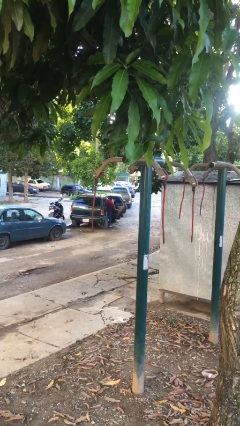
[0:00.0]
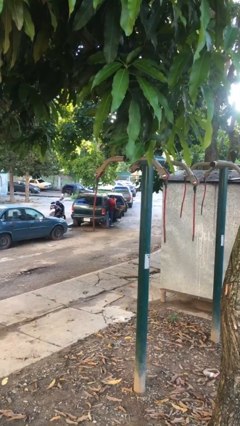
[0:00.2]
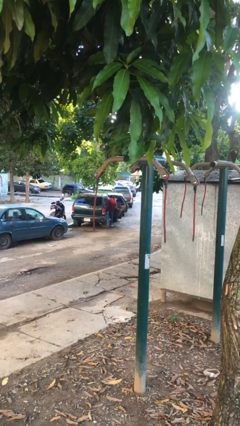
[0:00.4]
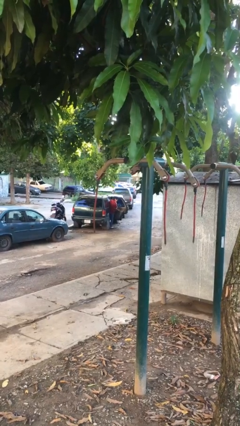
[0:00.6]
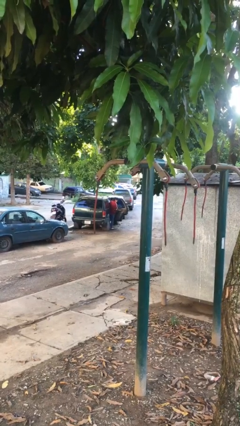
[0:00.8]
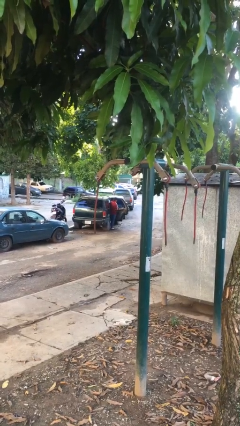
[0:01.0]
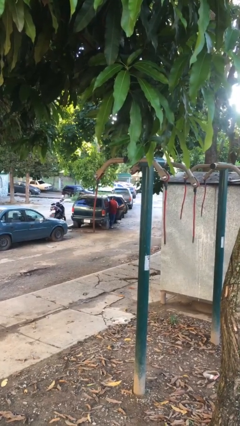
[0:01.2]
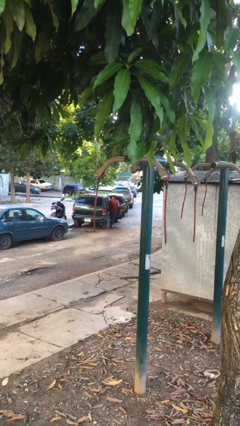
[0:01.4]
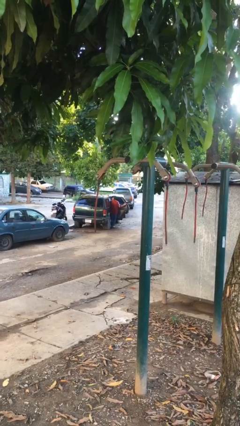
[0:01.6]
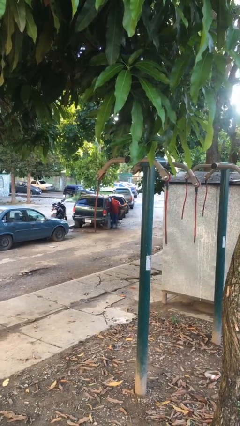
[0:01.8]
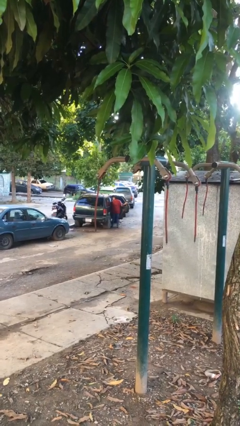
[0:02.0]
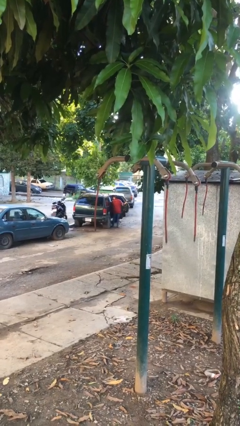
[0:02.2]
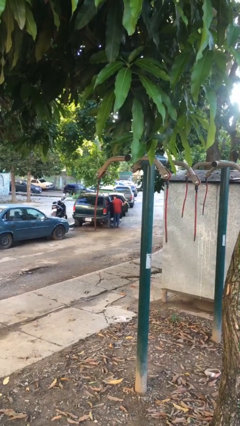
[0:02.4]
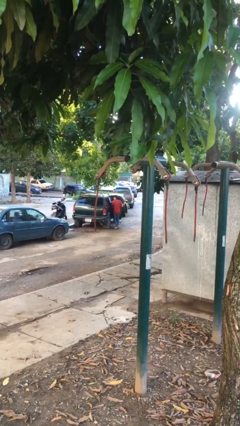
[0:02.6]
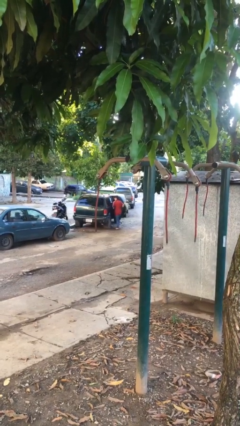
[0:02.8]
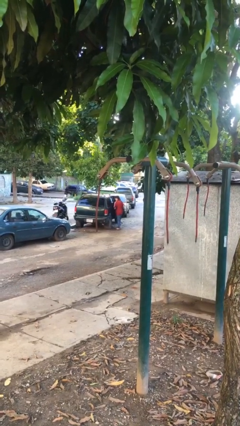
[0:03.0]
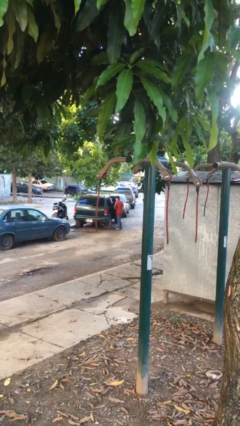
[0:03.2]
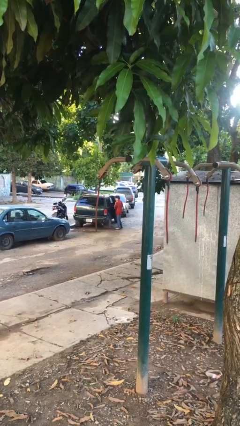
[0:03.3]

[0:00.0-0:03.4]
person exits car

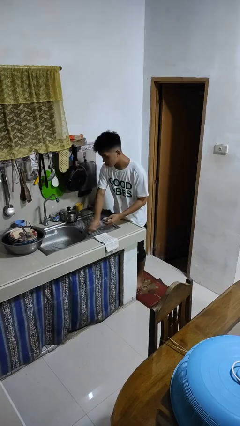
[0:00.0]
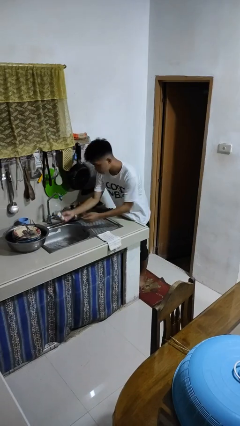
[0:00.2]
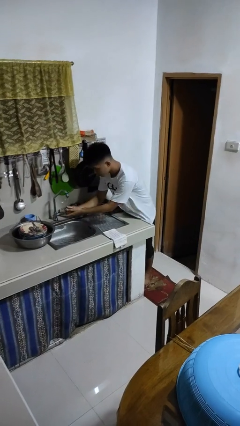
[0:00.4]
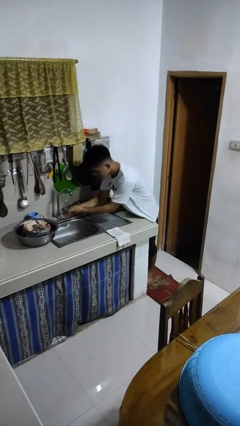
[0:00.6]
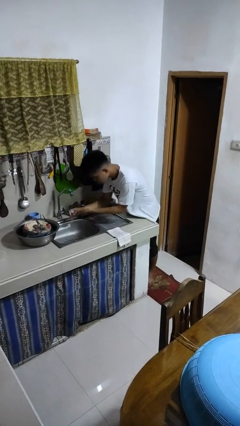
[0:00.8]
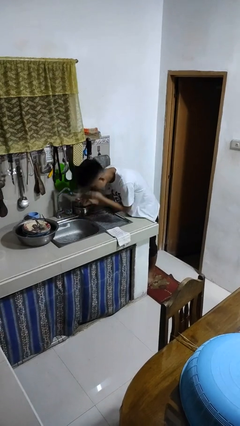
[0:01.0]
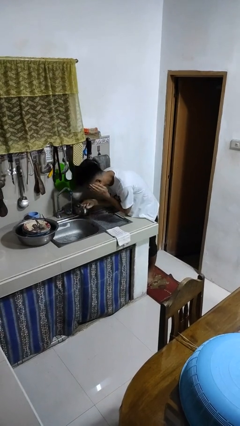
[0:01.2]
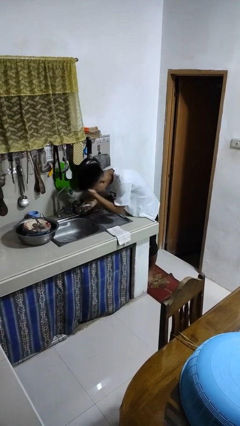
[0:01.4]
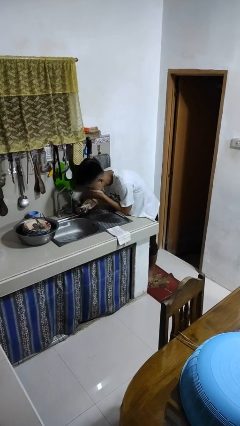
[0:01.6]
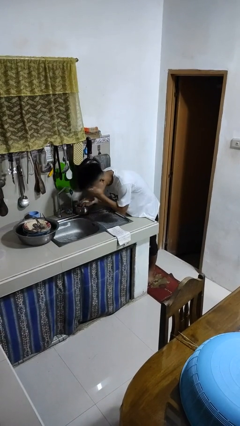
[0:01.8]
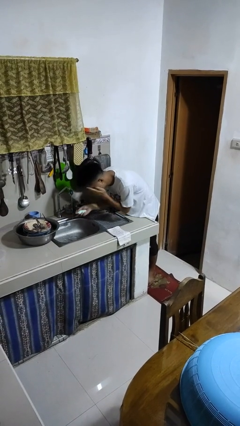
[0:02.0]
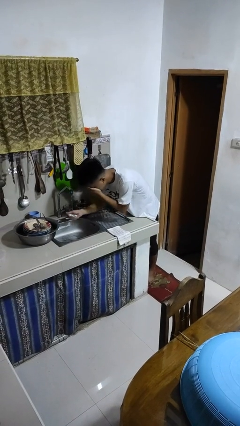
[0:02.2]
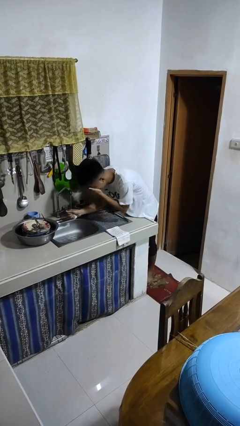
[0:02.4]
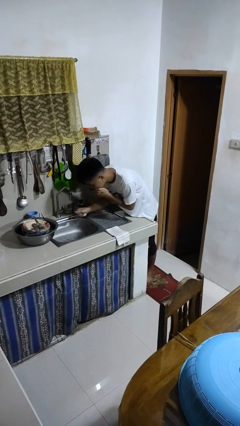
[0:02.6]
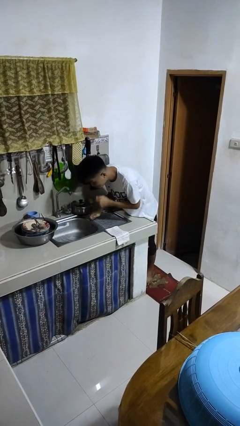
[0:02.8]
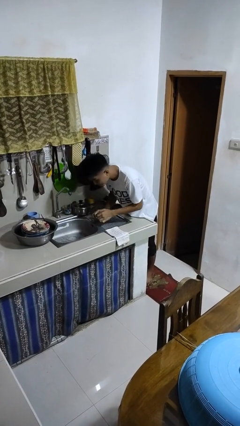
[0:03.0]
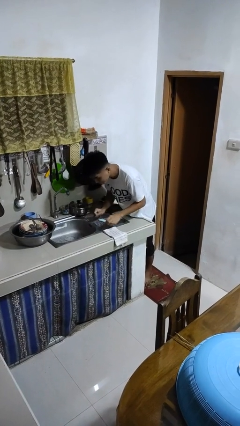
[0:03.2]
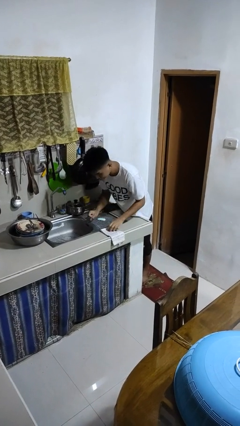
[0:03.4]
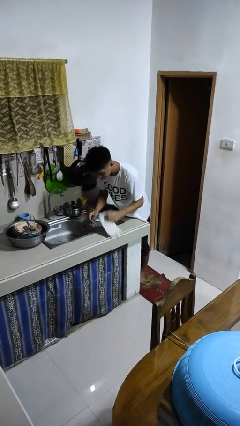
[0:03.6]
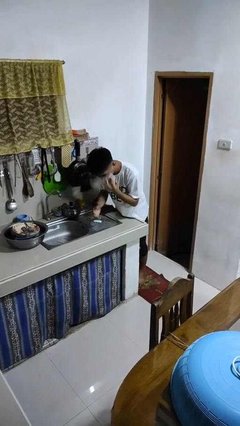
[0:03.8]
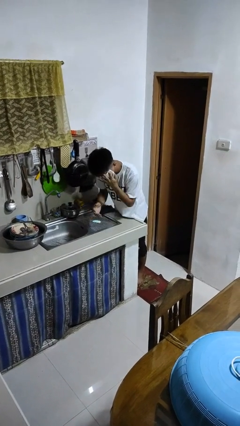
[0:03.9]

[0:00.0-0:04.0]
person washes face

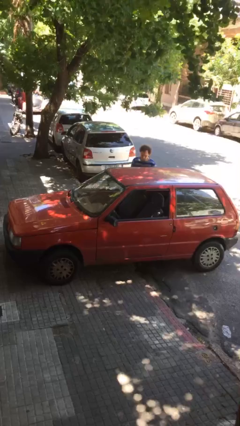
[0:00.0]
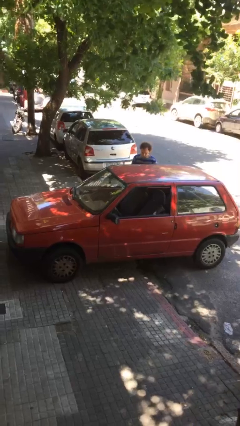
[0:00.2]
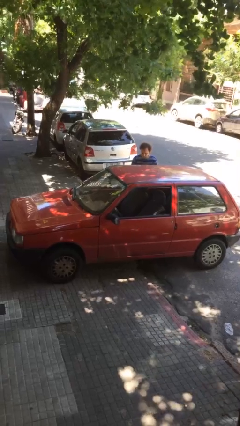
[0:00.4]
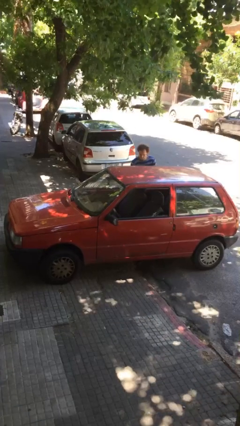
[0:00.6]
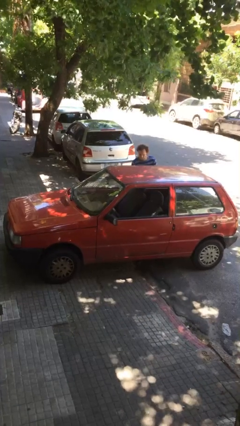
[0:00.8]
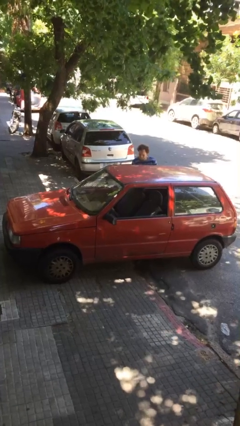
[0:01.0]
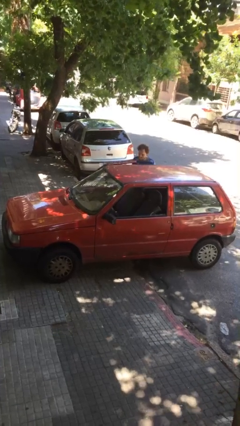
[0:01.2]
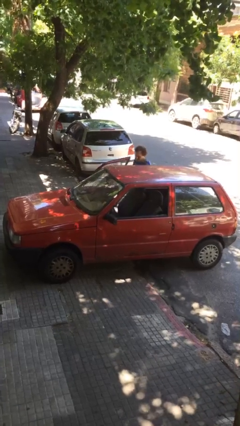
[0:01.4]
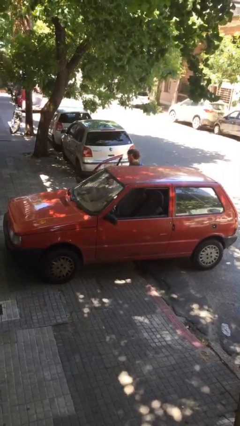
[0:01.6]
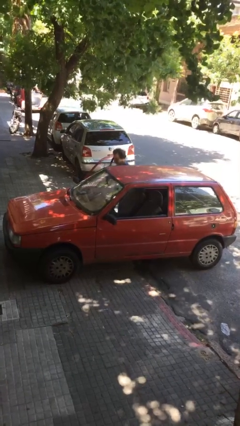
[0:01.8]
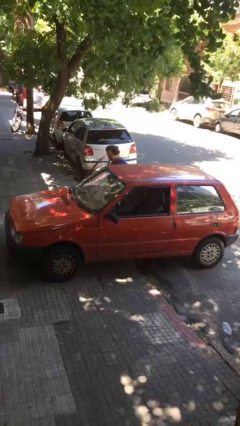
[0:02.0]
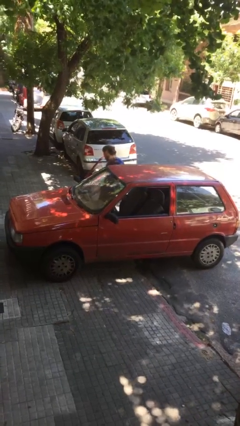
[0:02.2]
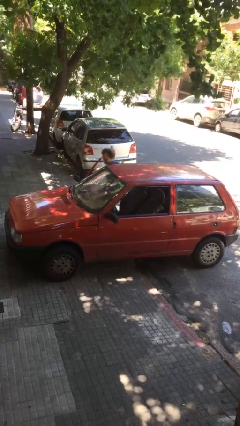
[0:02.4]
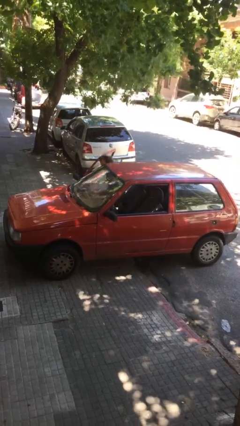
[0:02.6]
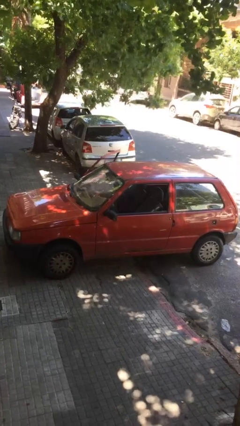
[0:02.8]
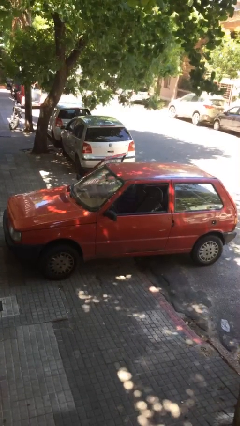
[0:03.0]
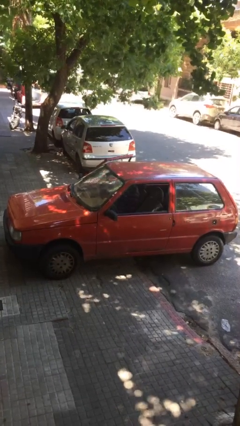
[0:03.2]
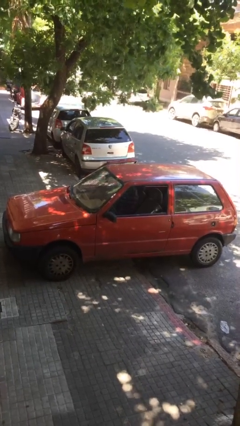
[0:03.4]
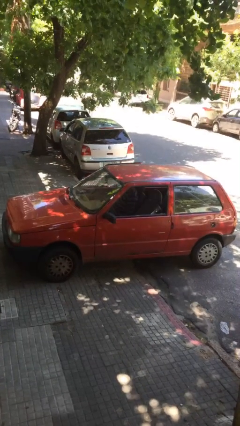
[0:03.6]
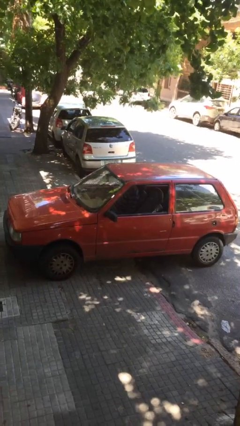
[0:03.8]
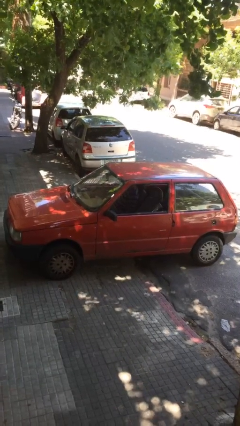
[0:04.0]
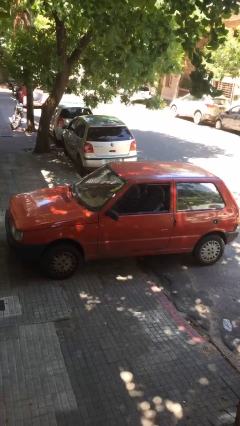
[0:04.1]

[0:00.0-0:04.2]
car picks up person

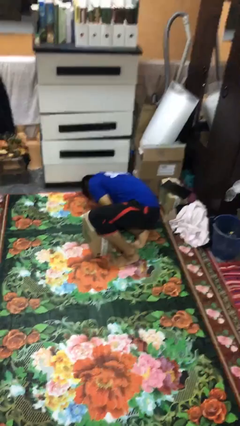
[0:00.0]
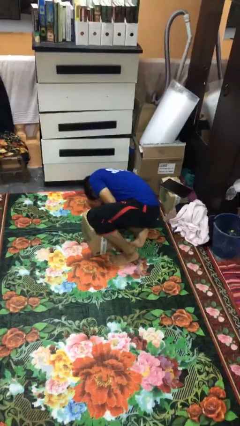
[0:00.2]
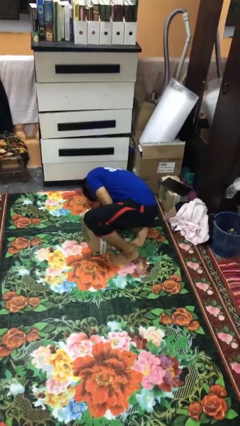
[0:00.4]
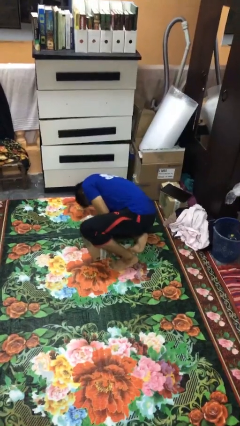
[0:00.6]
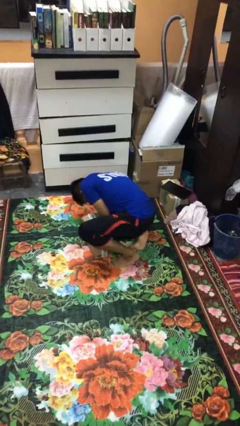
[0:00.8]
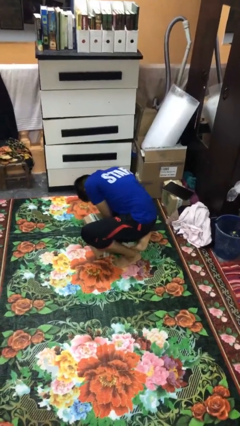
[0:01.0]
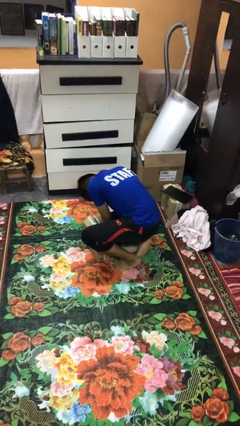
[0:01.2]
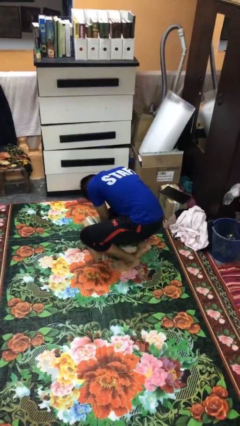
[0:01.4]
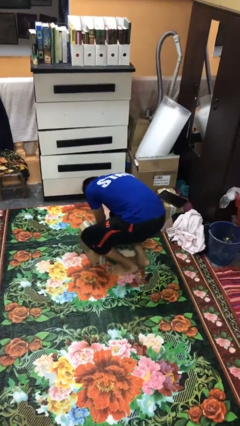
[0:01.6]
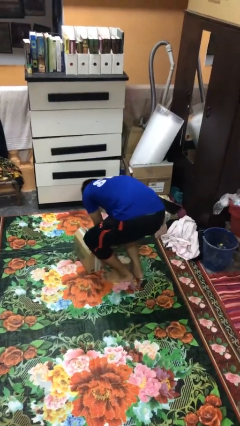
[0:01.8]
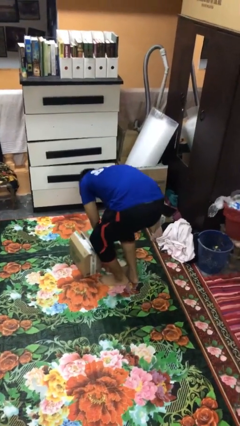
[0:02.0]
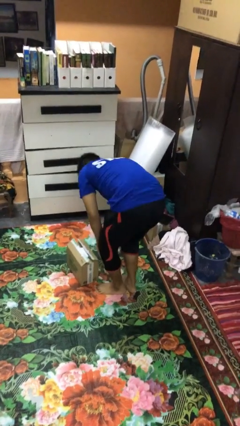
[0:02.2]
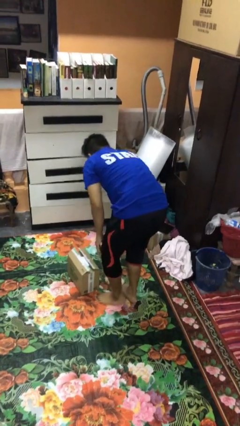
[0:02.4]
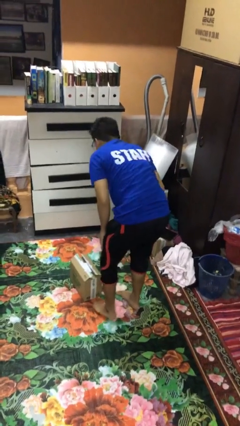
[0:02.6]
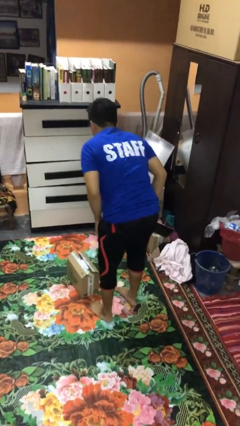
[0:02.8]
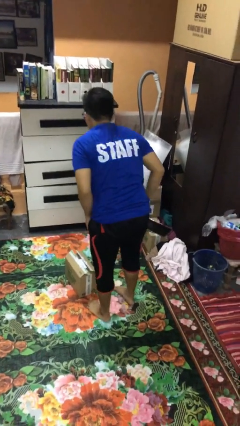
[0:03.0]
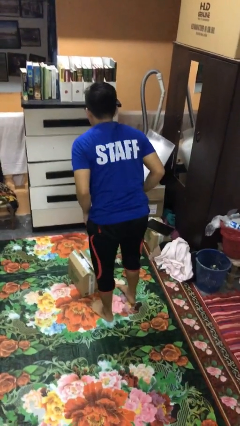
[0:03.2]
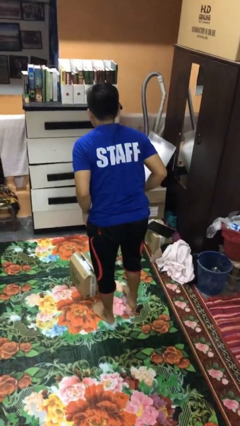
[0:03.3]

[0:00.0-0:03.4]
person stands up from floor

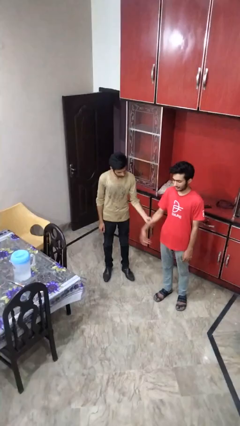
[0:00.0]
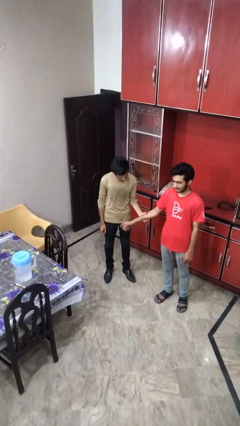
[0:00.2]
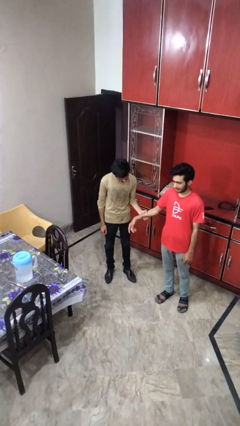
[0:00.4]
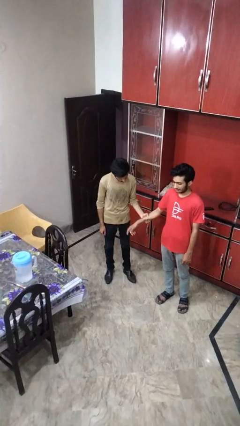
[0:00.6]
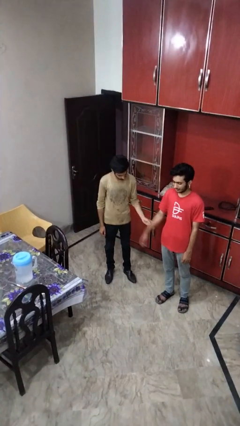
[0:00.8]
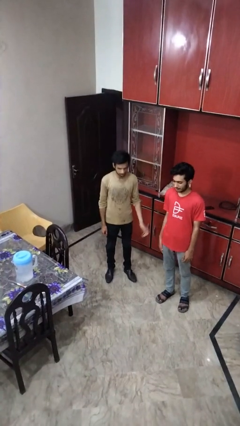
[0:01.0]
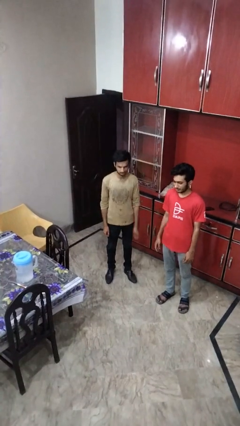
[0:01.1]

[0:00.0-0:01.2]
person grabs person by forearm

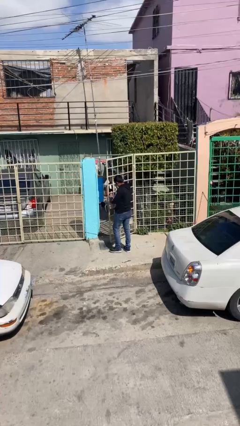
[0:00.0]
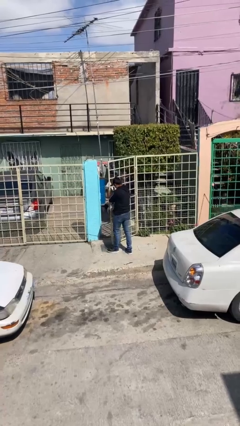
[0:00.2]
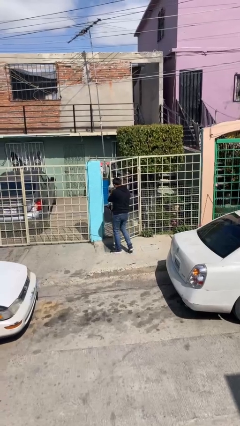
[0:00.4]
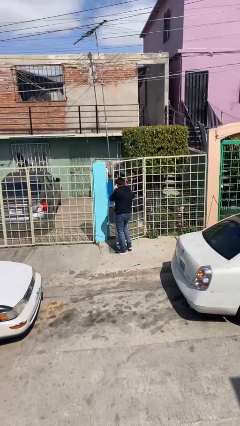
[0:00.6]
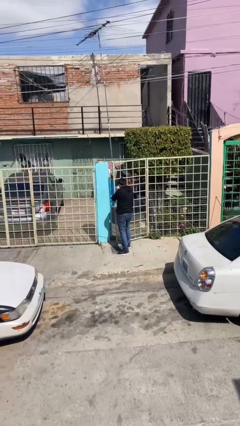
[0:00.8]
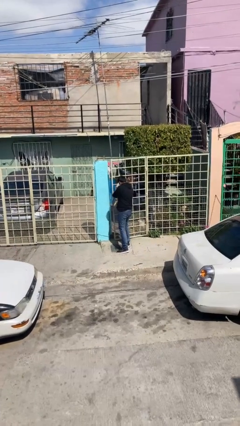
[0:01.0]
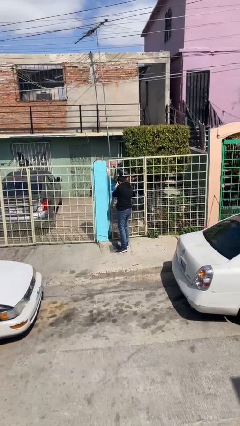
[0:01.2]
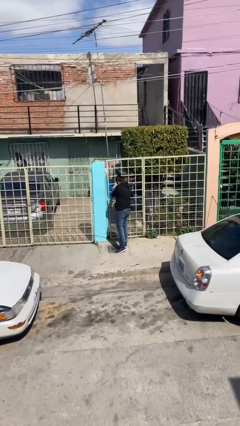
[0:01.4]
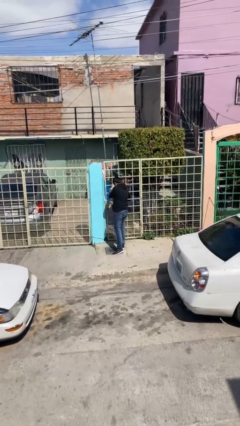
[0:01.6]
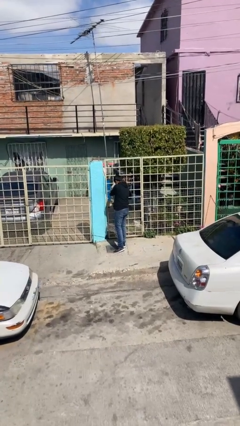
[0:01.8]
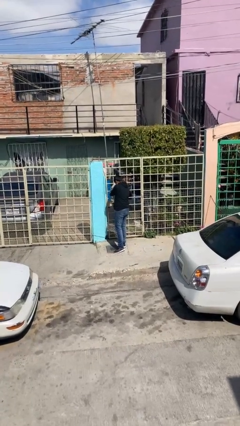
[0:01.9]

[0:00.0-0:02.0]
person closes facility door
